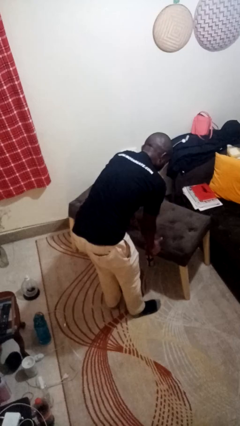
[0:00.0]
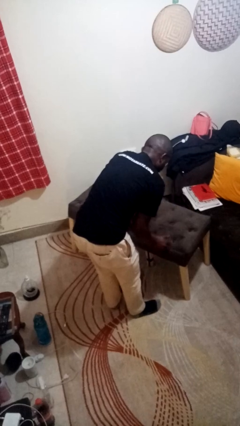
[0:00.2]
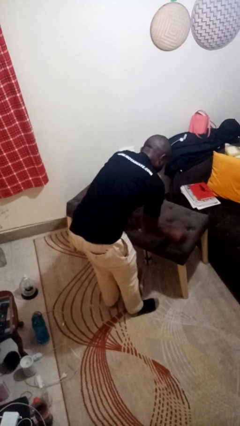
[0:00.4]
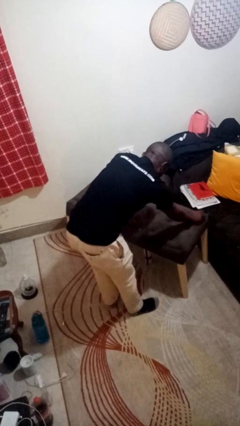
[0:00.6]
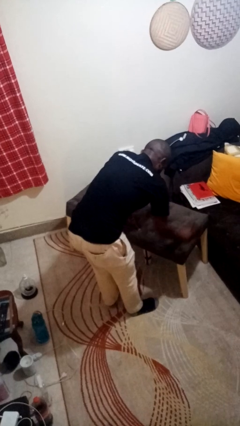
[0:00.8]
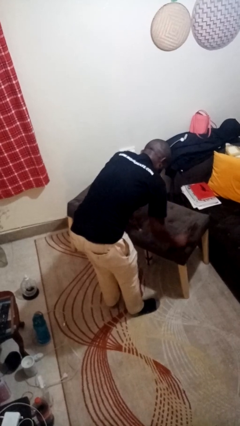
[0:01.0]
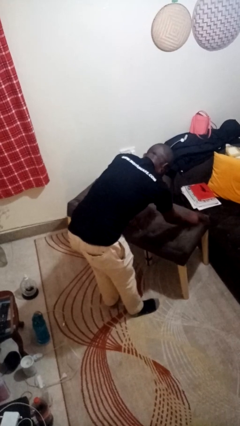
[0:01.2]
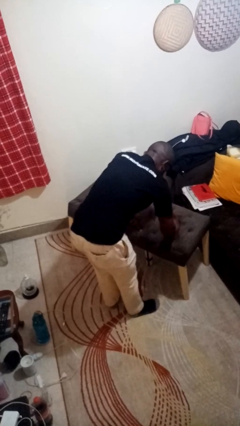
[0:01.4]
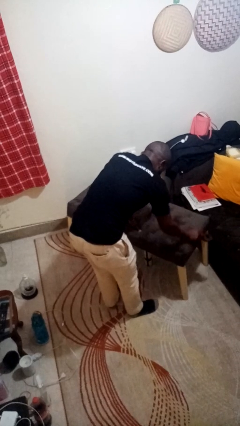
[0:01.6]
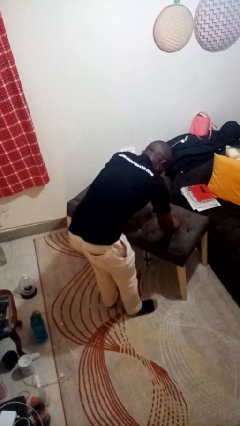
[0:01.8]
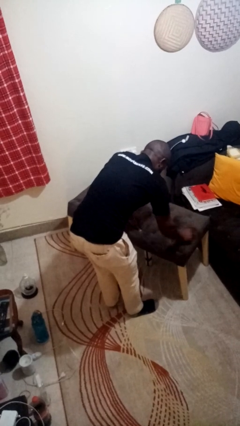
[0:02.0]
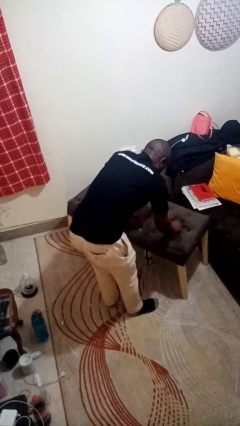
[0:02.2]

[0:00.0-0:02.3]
person cleans table with rag

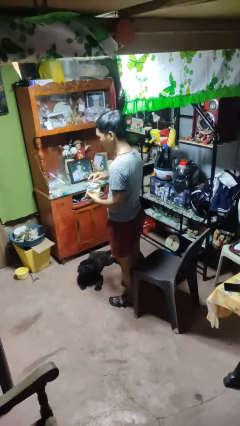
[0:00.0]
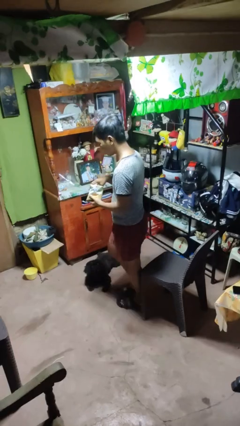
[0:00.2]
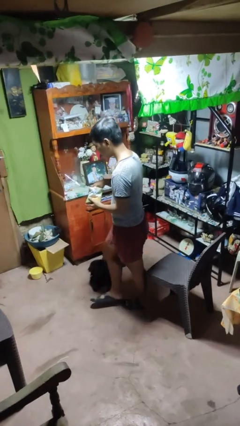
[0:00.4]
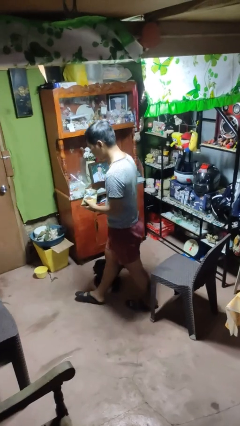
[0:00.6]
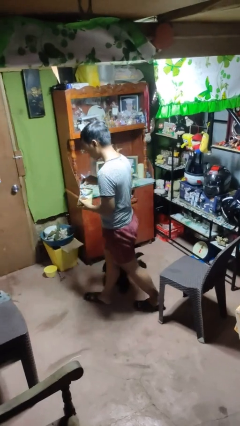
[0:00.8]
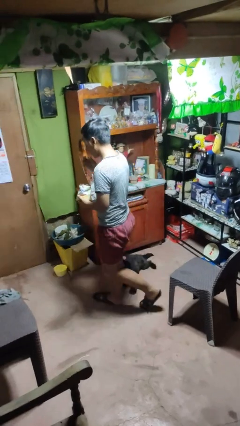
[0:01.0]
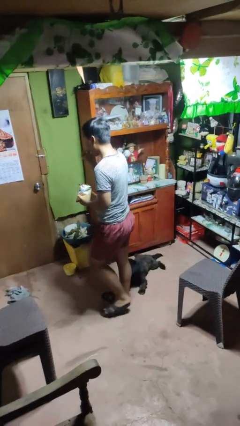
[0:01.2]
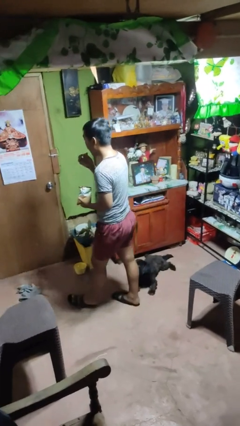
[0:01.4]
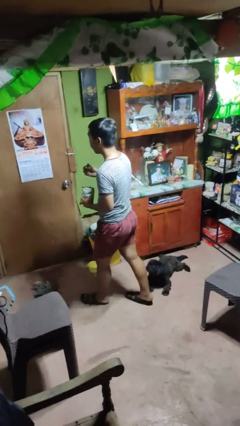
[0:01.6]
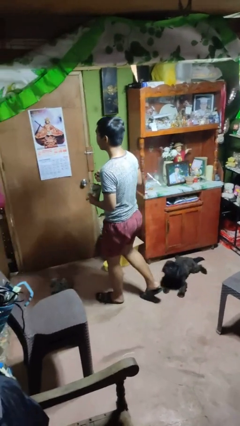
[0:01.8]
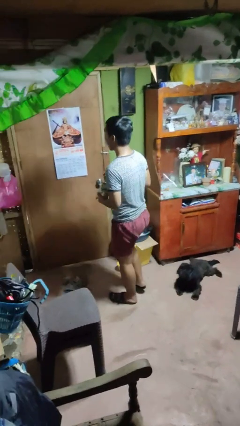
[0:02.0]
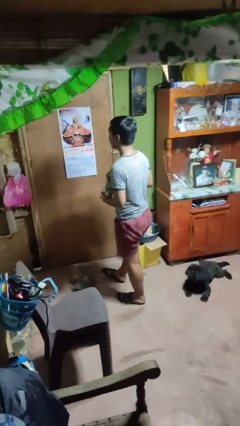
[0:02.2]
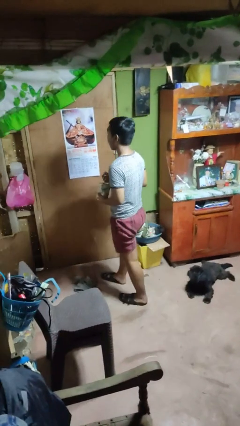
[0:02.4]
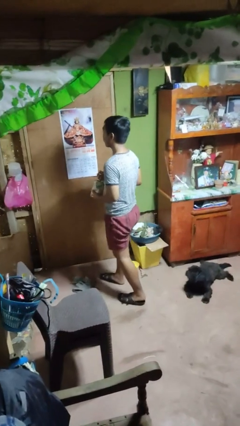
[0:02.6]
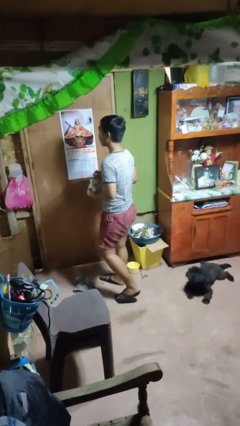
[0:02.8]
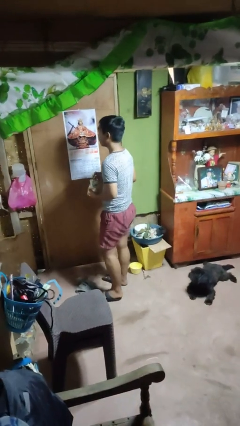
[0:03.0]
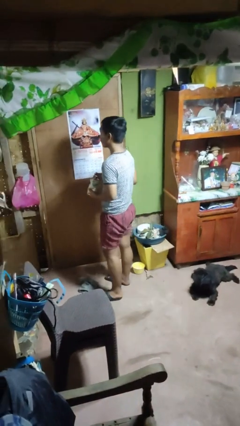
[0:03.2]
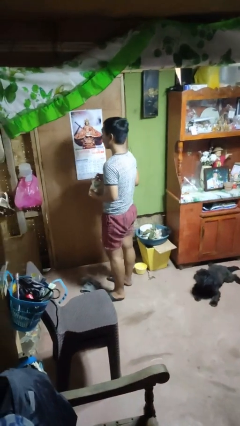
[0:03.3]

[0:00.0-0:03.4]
person eats snack from bag

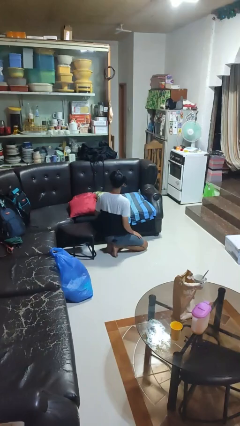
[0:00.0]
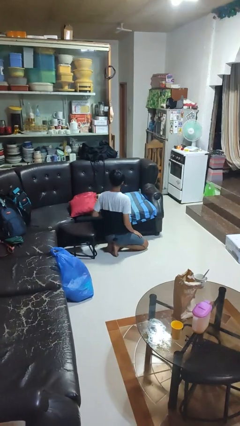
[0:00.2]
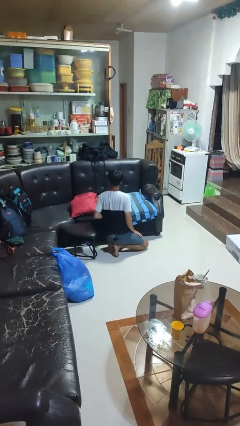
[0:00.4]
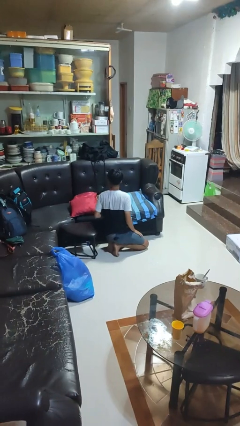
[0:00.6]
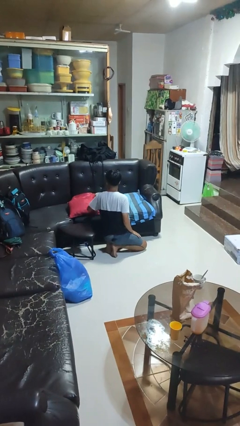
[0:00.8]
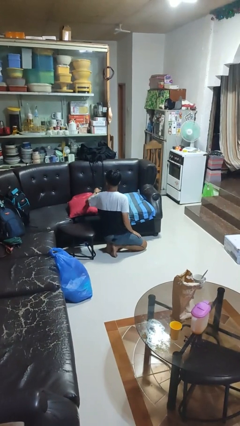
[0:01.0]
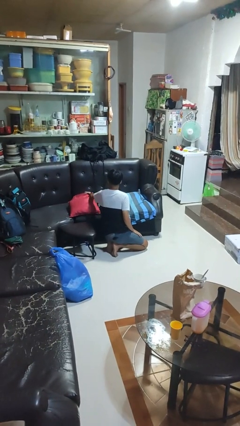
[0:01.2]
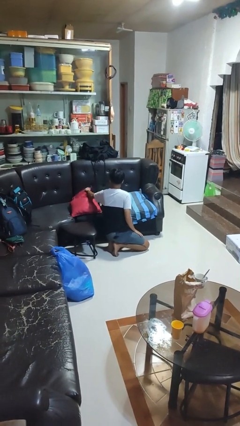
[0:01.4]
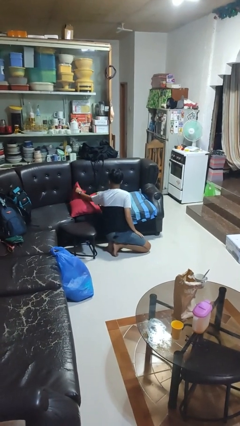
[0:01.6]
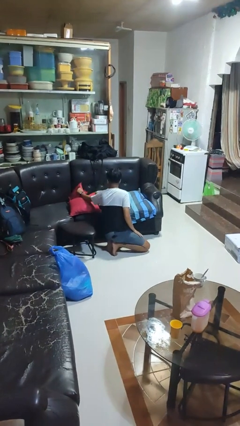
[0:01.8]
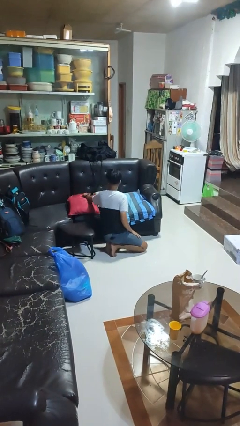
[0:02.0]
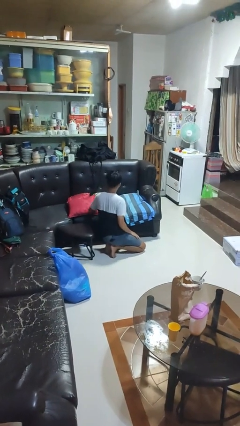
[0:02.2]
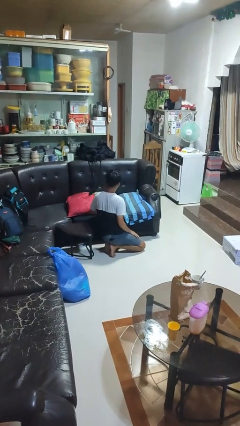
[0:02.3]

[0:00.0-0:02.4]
person searches in couch

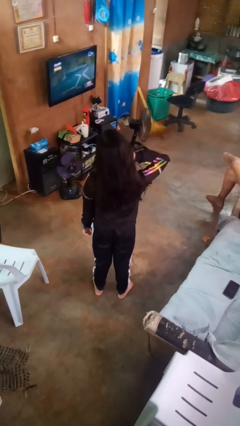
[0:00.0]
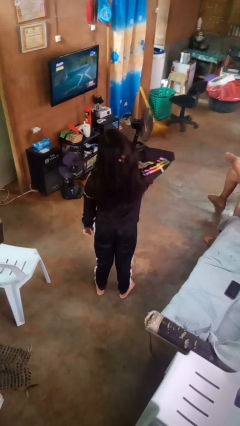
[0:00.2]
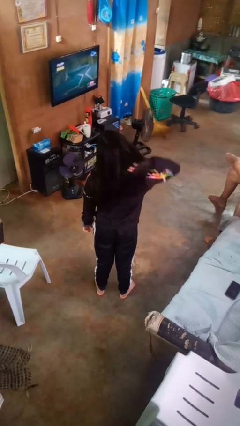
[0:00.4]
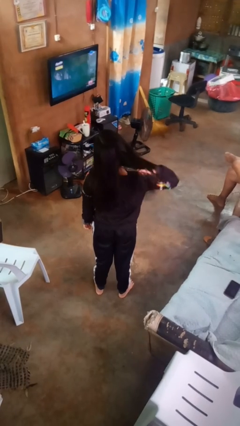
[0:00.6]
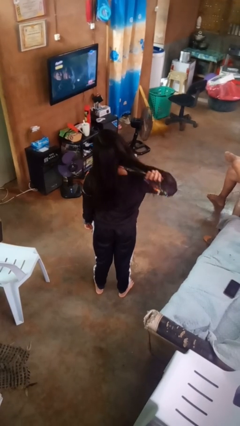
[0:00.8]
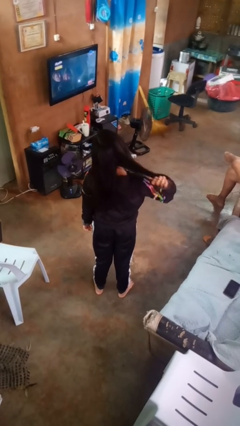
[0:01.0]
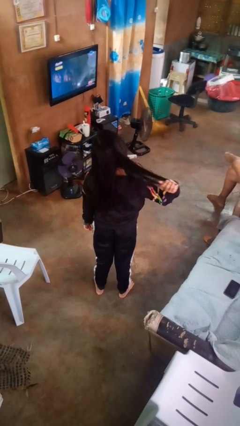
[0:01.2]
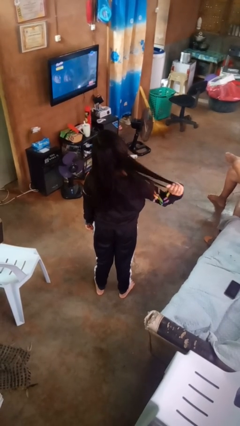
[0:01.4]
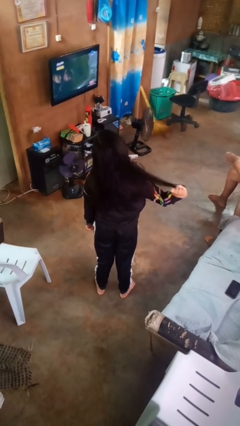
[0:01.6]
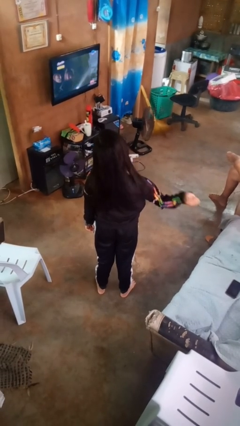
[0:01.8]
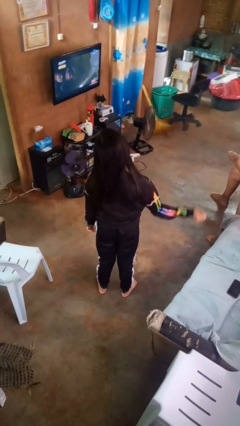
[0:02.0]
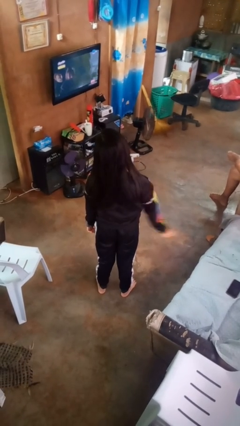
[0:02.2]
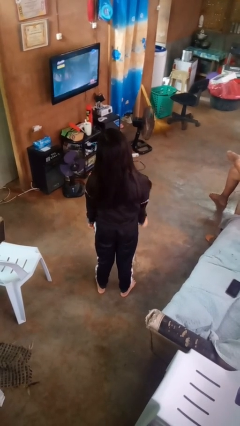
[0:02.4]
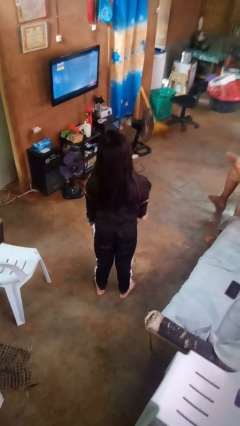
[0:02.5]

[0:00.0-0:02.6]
person strokes hair

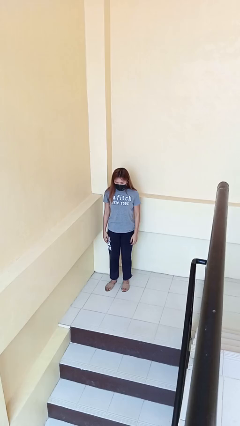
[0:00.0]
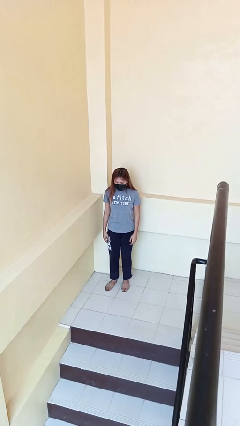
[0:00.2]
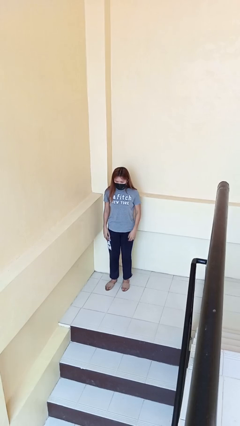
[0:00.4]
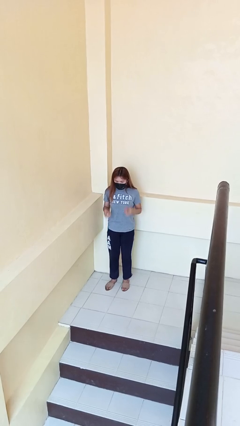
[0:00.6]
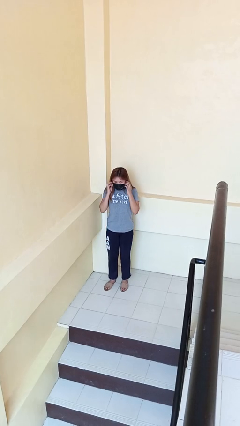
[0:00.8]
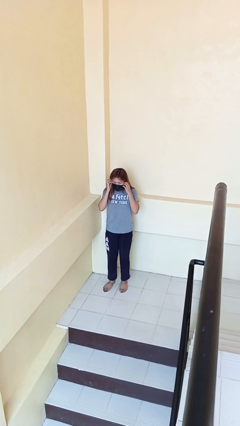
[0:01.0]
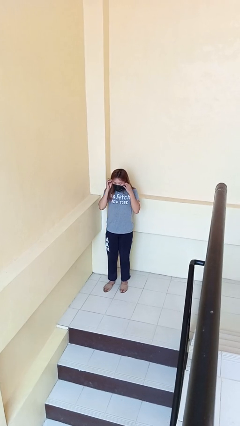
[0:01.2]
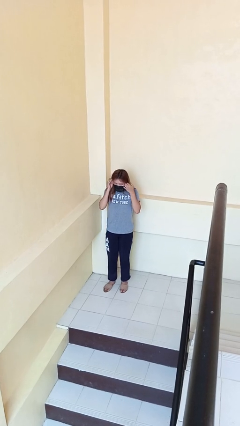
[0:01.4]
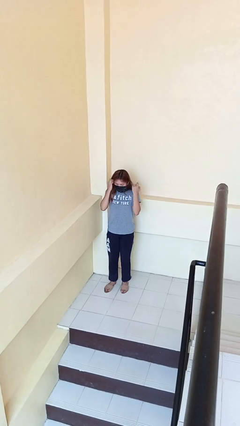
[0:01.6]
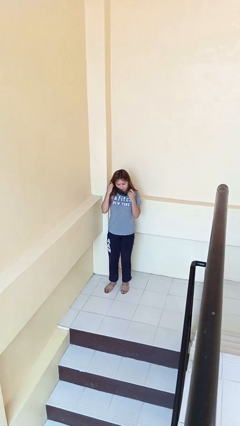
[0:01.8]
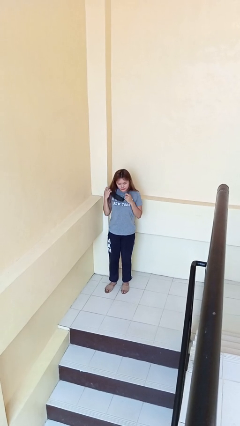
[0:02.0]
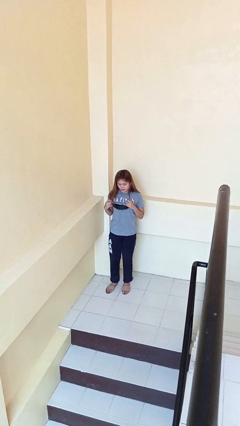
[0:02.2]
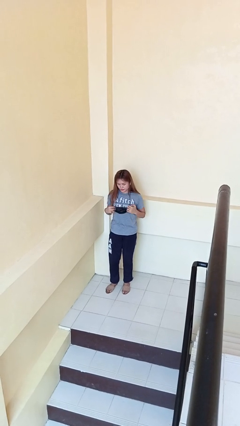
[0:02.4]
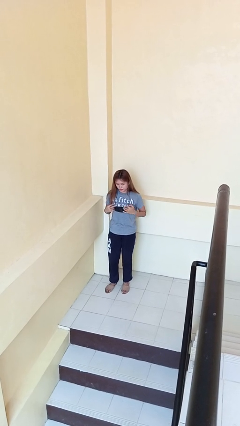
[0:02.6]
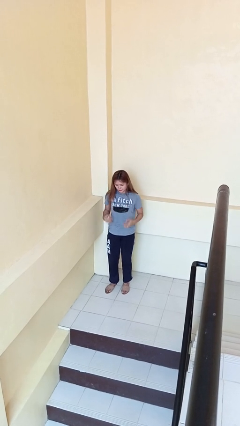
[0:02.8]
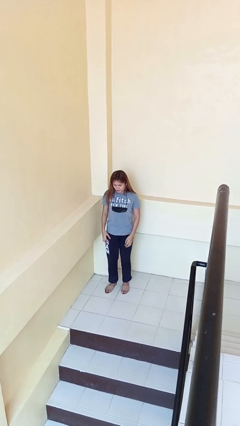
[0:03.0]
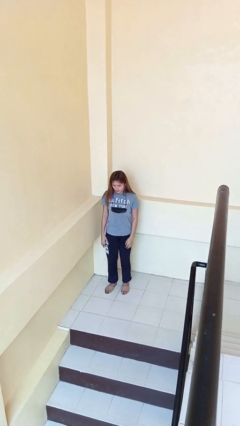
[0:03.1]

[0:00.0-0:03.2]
person takes off facemask

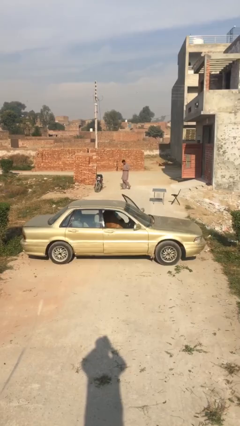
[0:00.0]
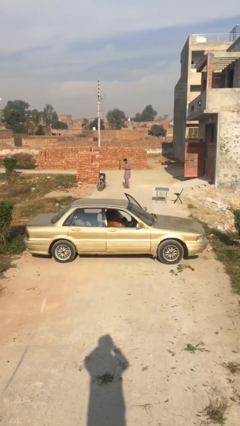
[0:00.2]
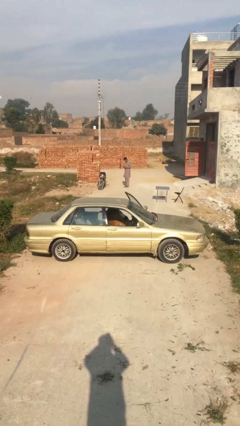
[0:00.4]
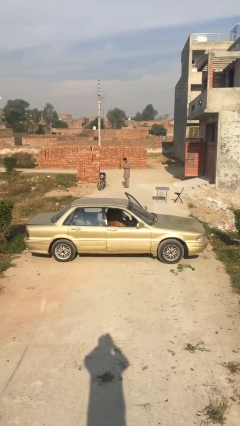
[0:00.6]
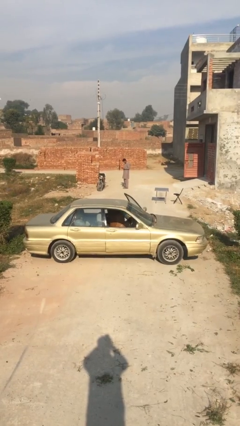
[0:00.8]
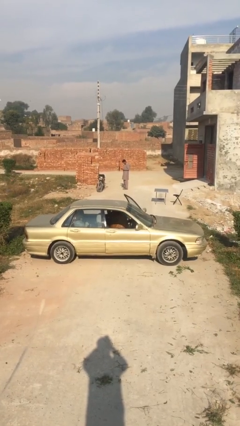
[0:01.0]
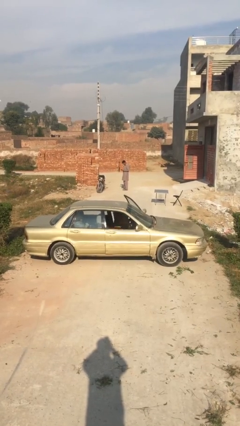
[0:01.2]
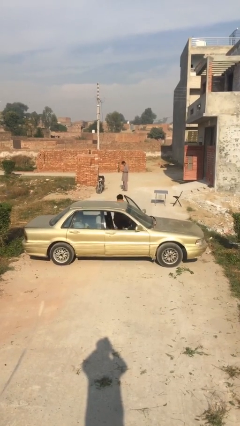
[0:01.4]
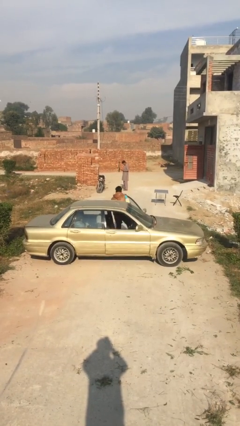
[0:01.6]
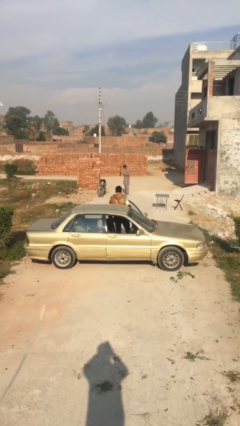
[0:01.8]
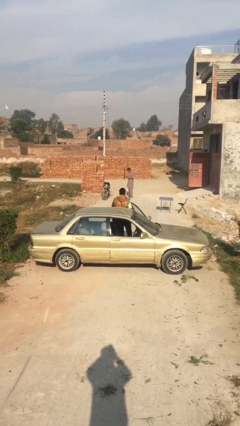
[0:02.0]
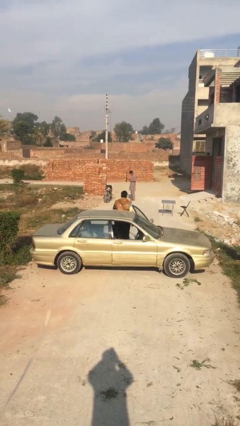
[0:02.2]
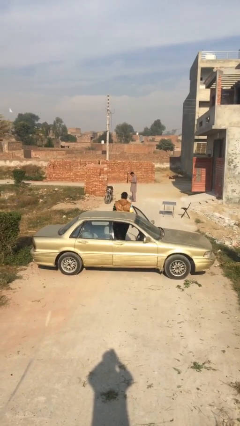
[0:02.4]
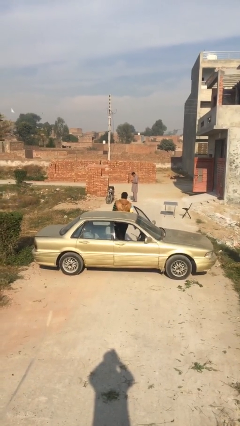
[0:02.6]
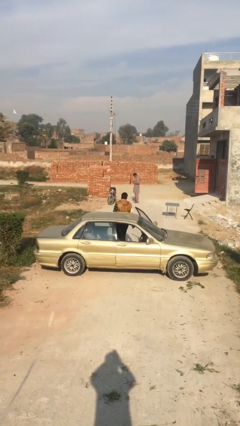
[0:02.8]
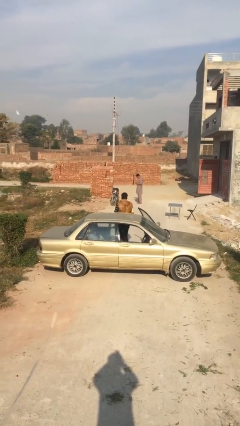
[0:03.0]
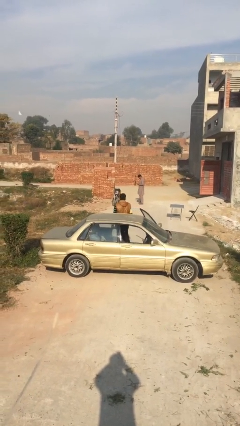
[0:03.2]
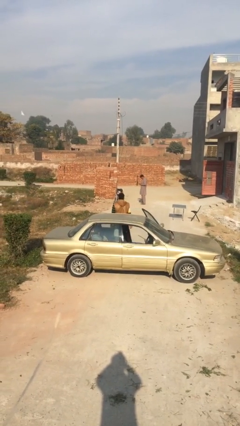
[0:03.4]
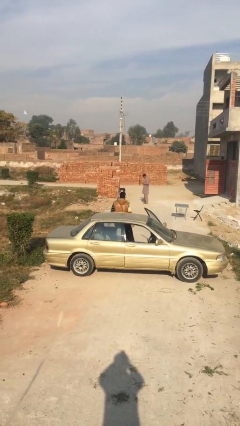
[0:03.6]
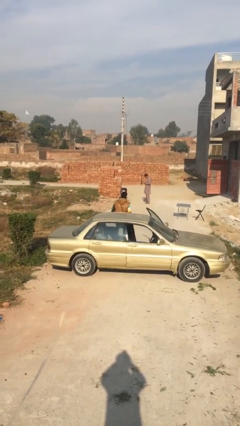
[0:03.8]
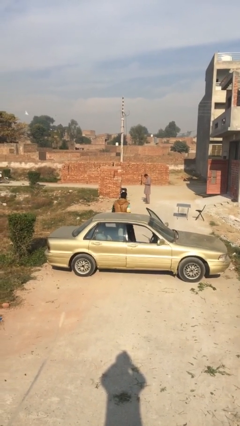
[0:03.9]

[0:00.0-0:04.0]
person exits car
